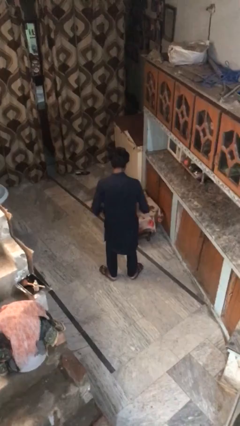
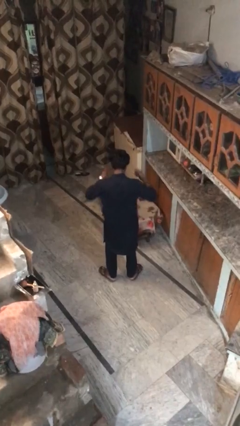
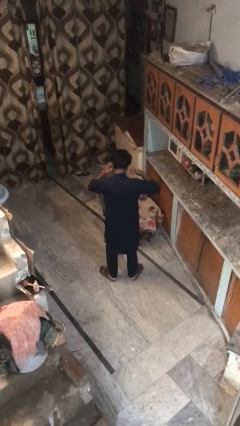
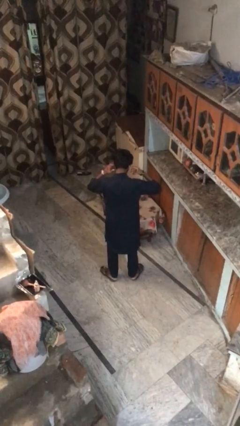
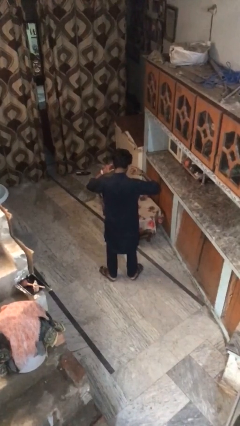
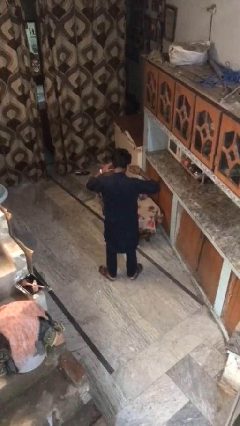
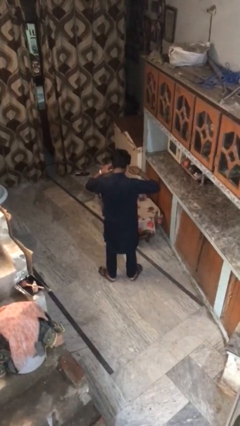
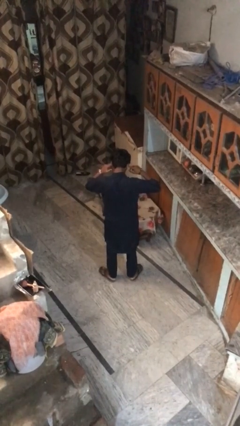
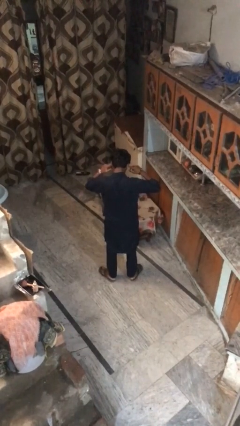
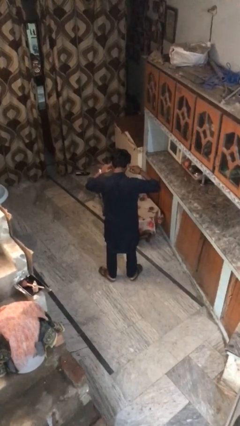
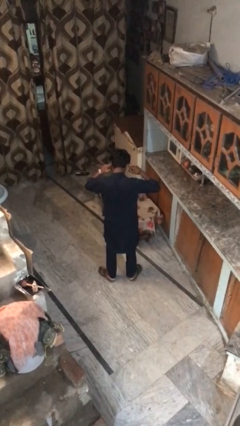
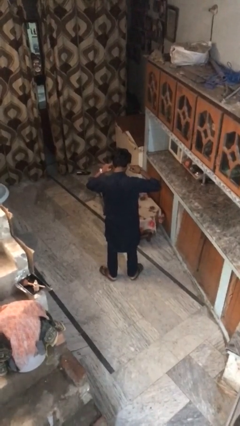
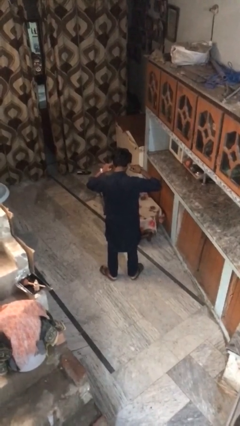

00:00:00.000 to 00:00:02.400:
person puts fingers in ear

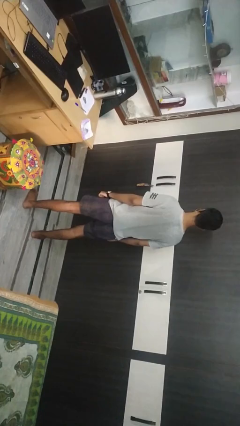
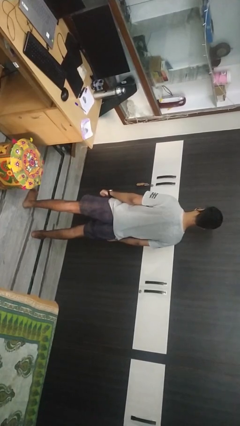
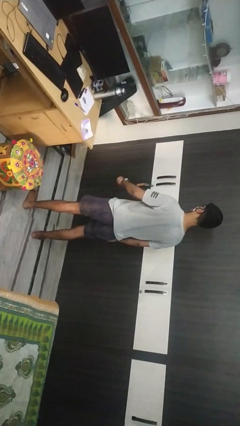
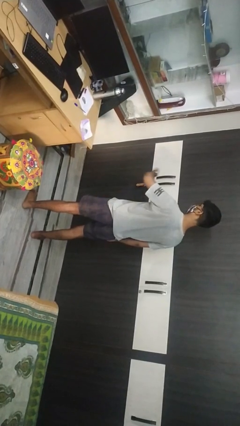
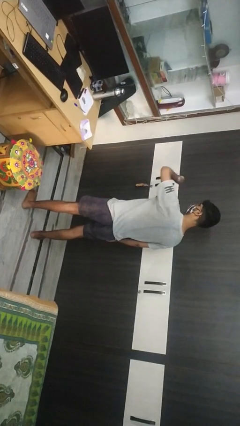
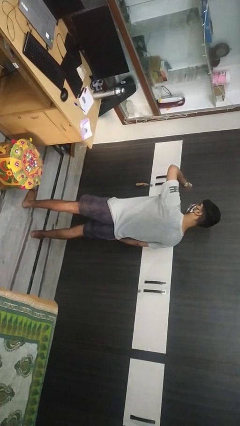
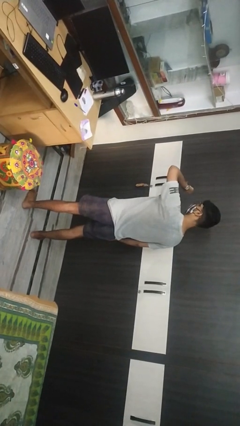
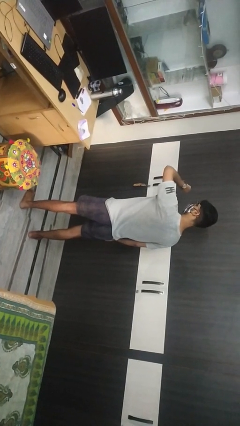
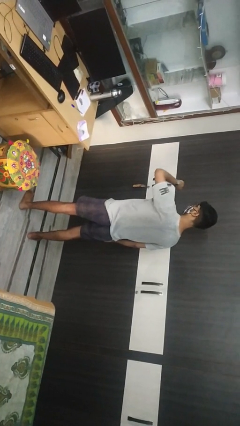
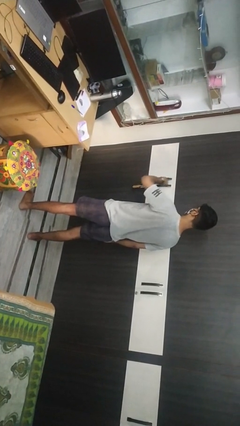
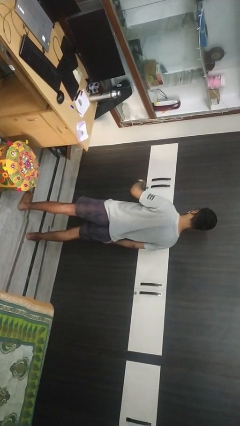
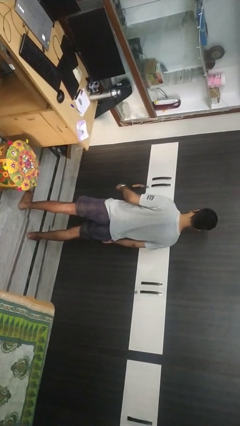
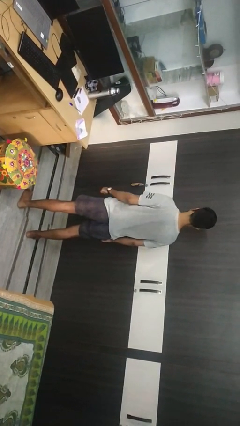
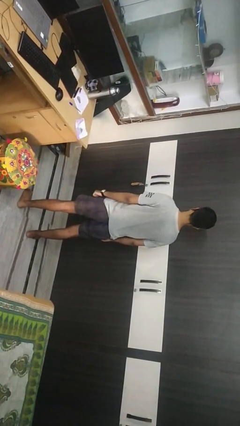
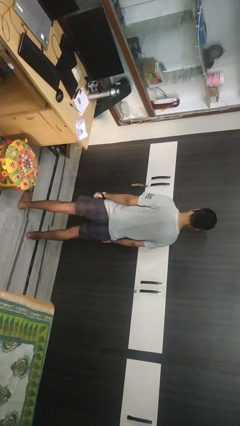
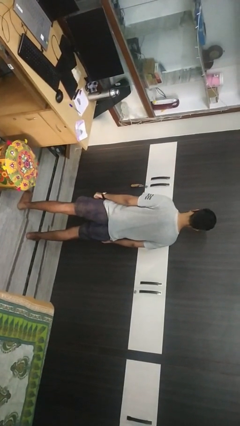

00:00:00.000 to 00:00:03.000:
person looks at wristwatch

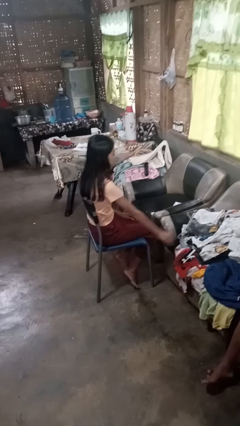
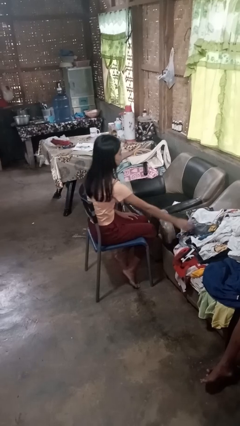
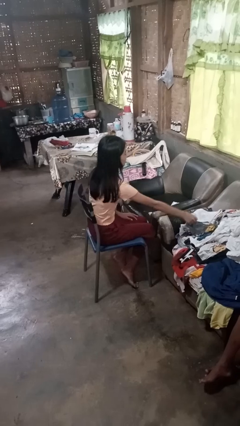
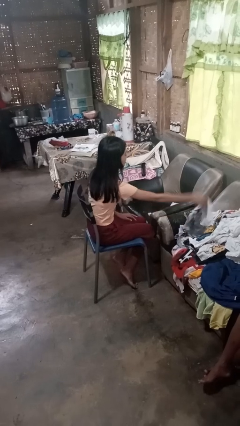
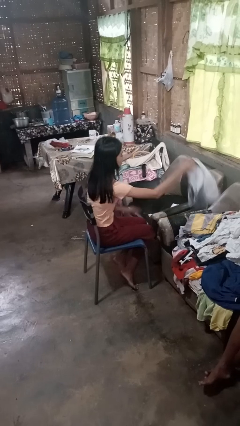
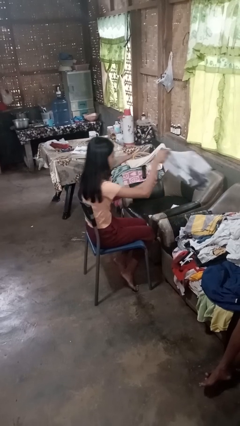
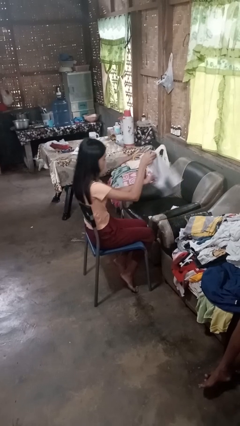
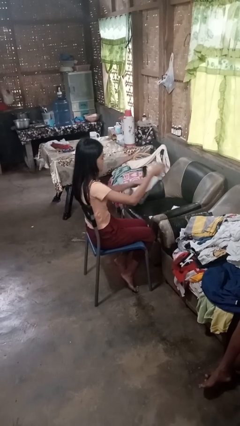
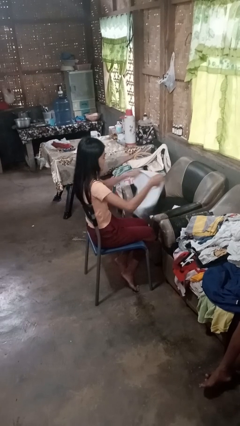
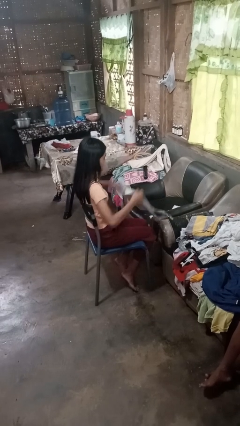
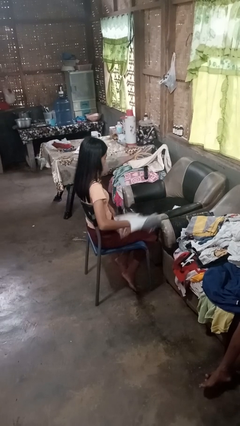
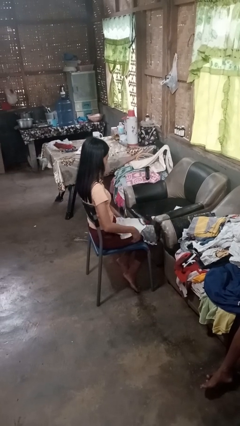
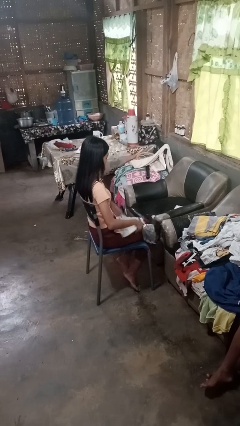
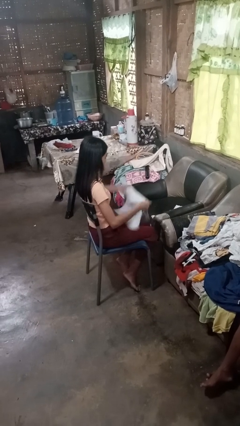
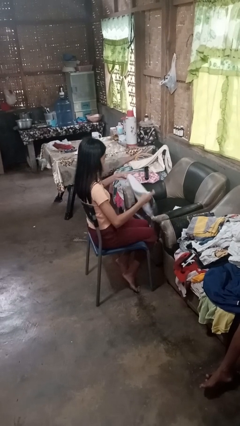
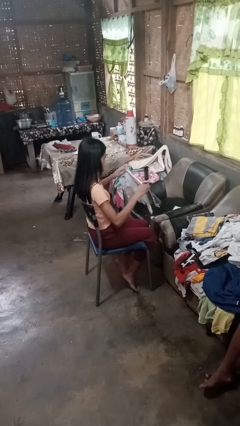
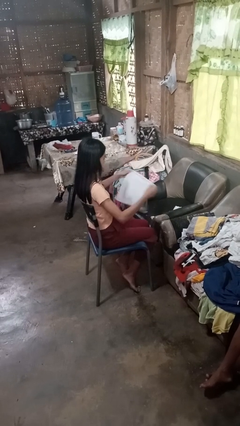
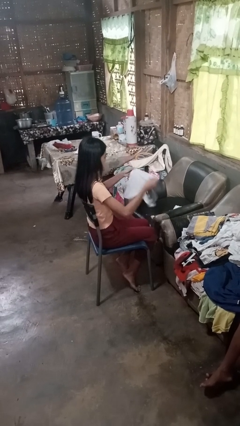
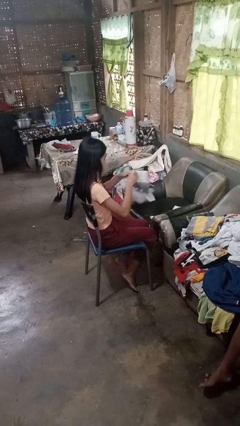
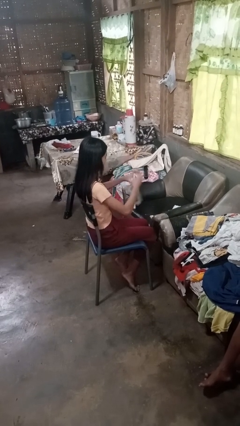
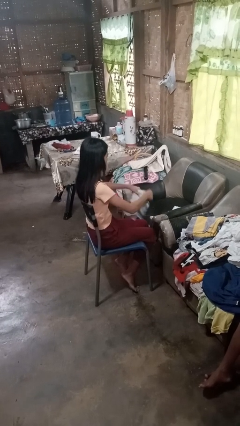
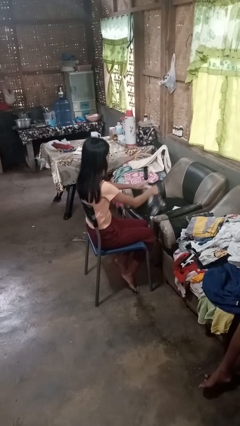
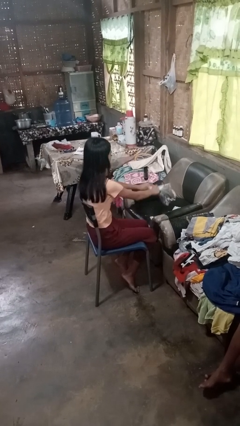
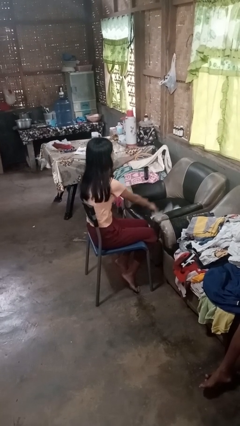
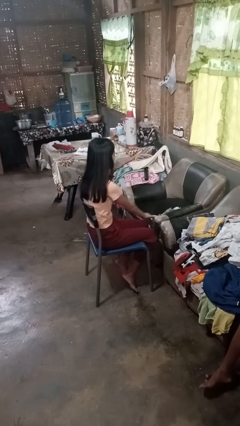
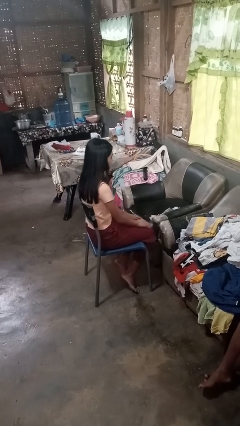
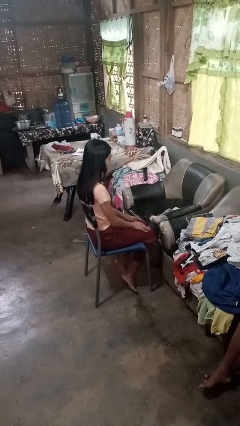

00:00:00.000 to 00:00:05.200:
person folds shirt

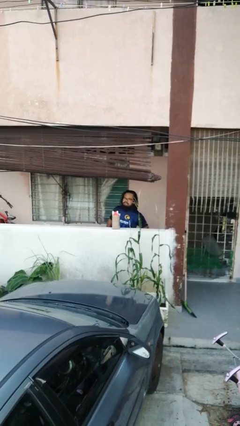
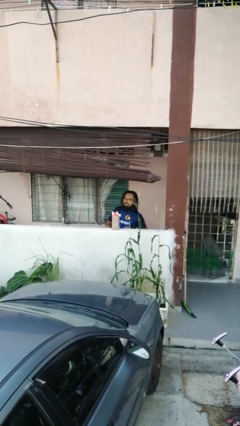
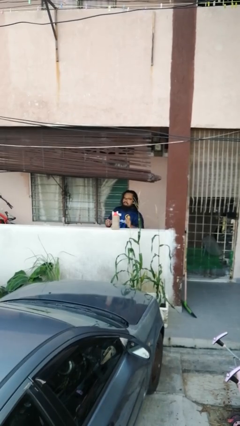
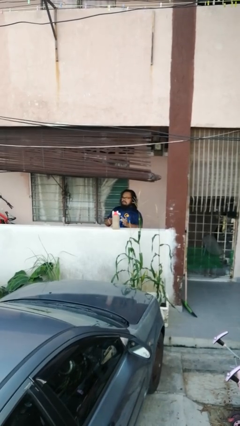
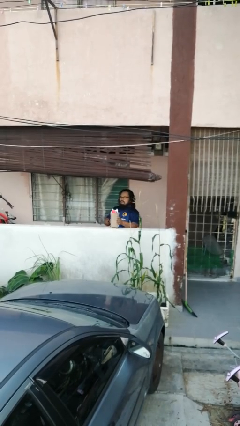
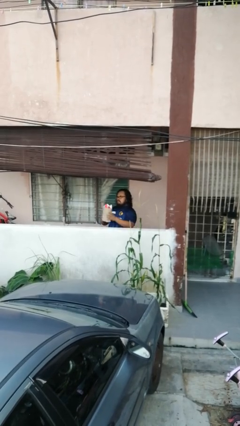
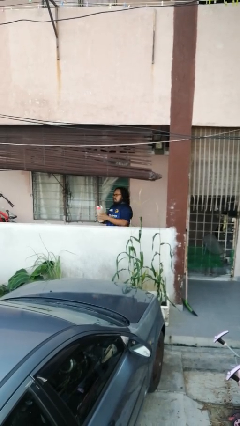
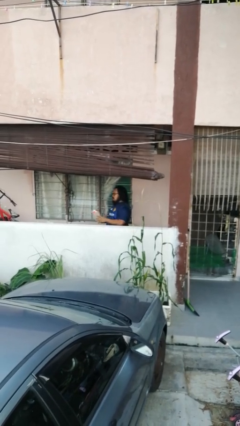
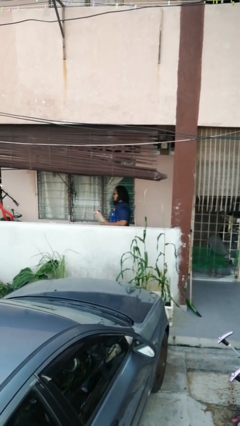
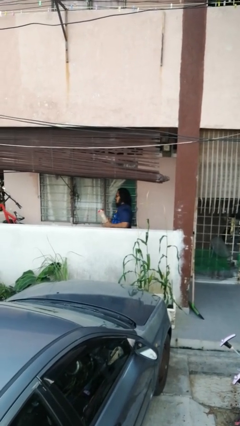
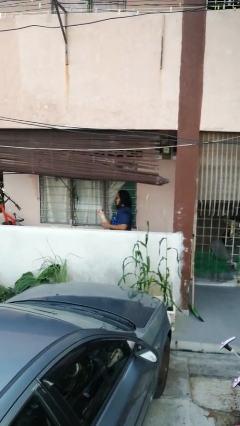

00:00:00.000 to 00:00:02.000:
person picks up object from countertop

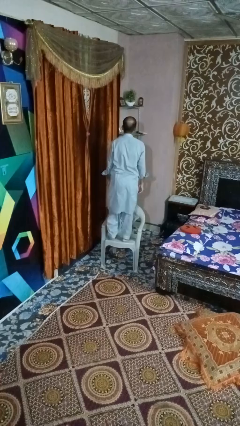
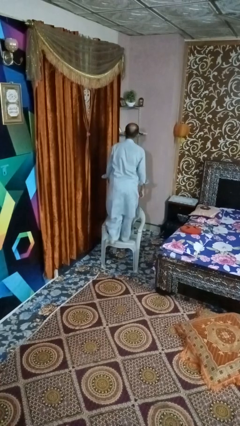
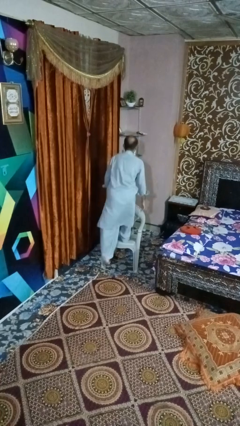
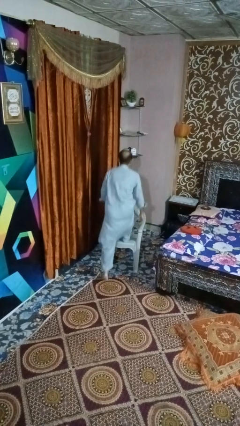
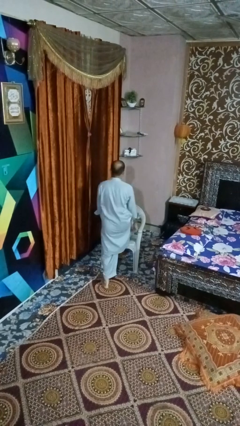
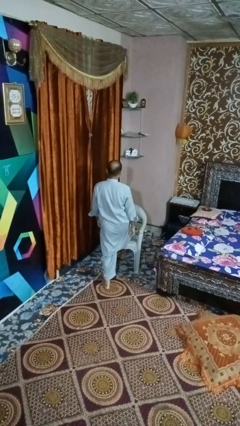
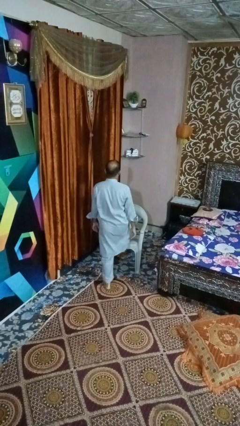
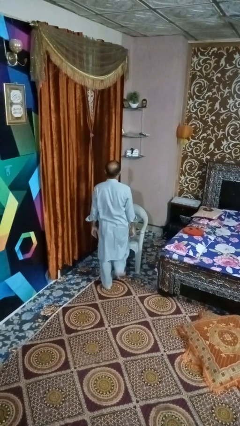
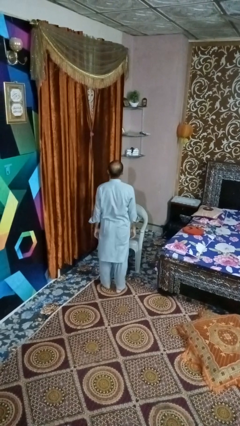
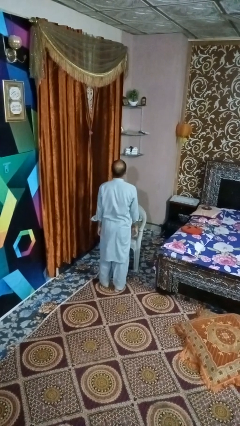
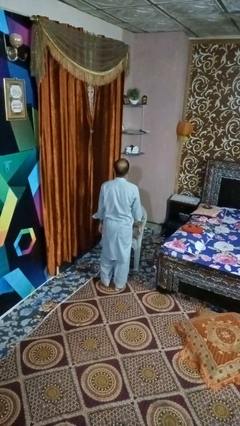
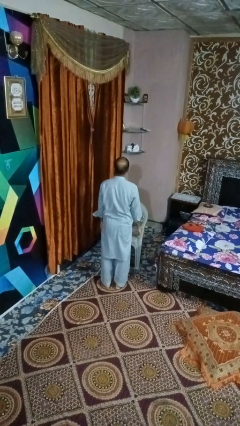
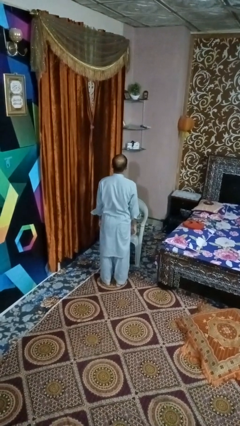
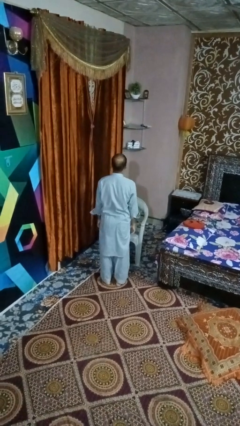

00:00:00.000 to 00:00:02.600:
person climbs off chair

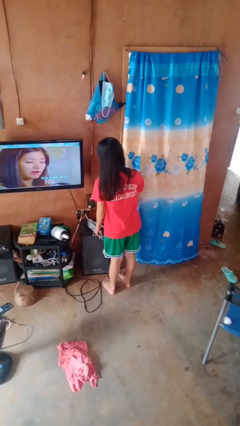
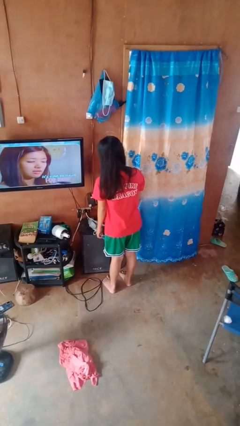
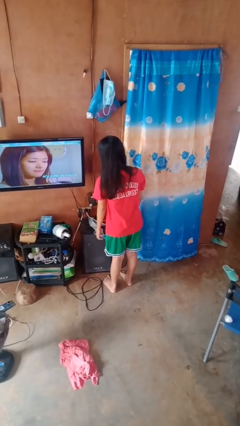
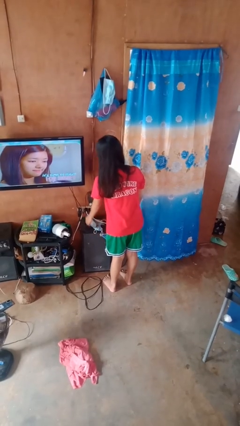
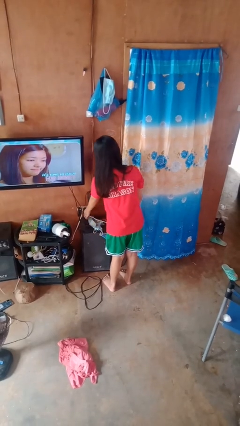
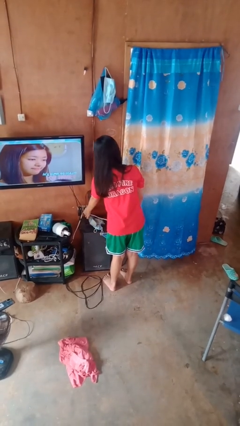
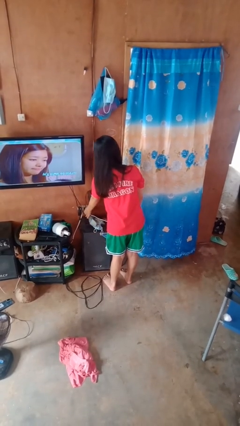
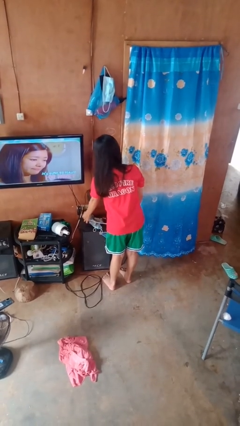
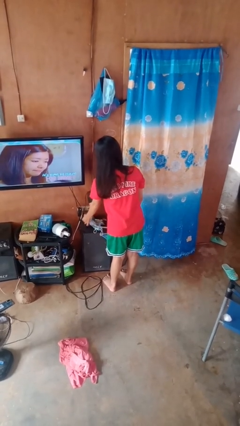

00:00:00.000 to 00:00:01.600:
person unplugs from electrical socket

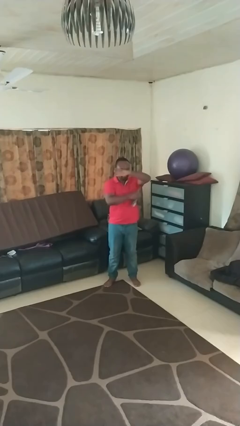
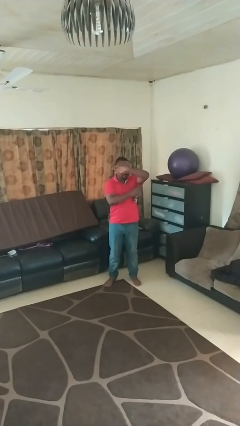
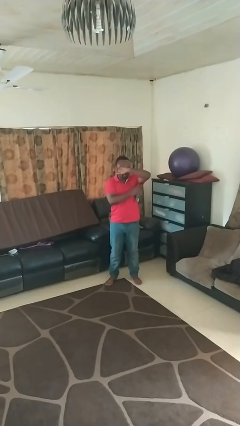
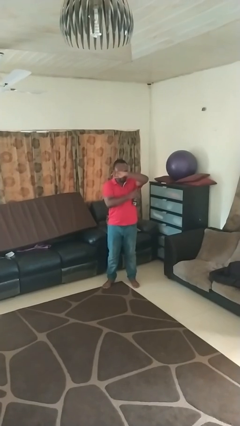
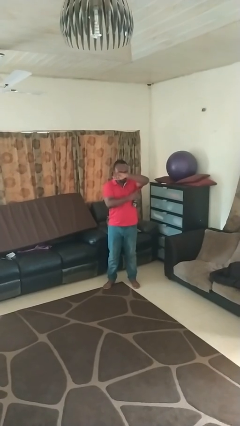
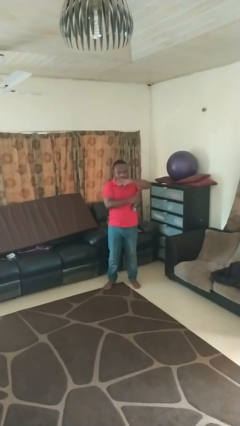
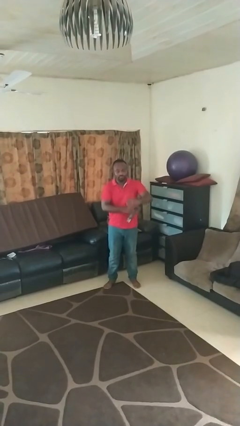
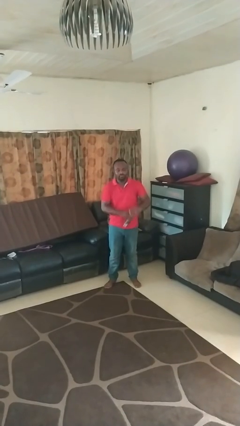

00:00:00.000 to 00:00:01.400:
person applies deodorant
